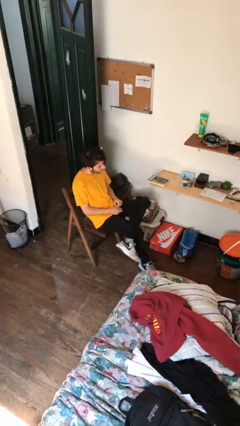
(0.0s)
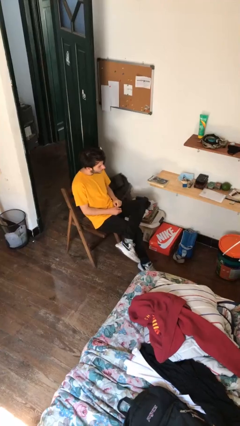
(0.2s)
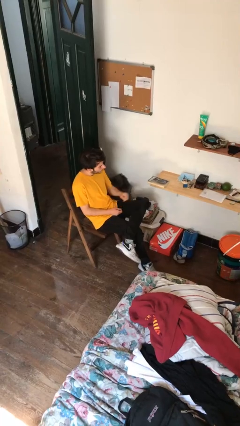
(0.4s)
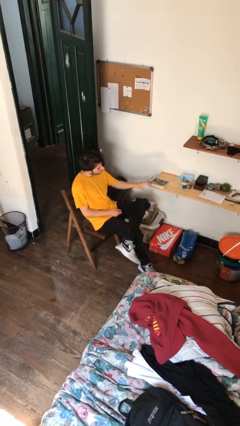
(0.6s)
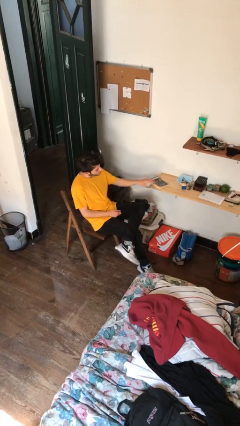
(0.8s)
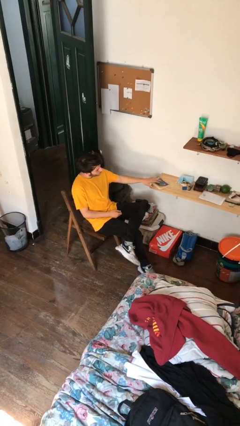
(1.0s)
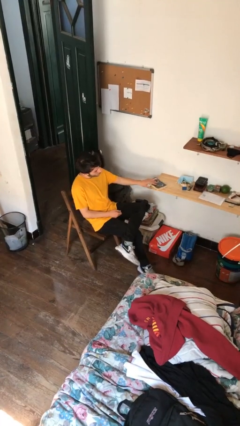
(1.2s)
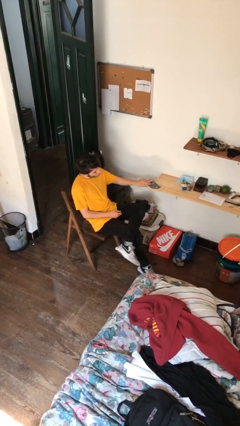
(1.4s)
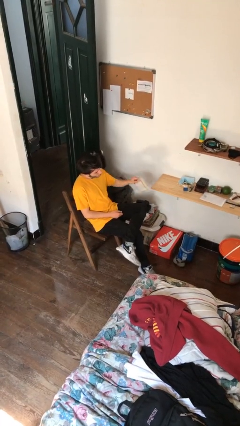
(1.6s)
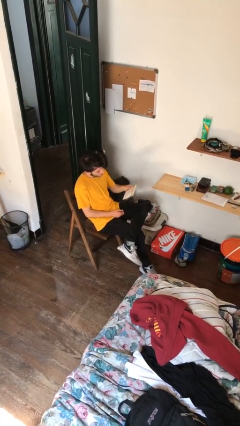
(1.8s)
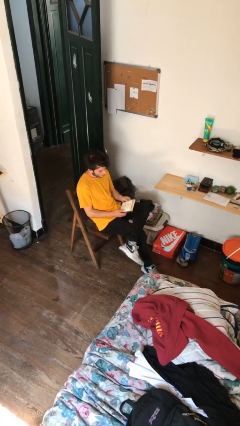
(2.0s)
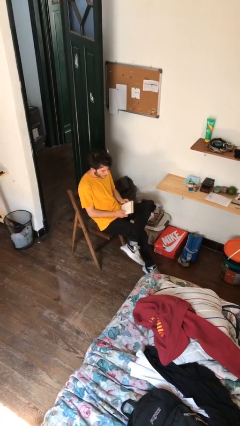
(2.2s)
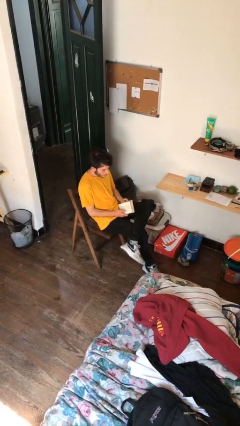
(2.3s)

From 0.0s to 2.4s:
person picks up object from table

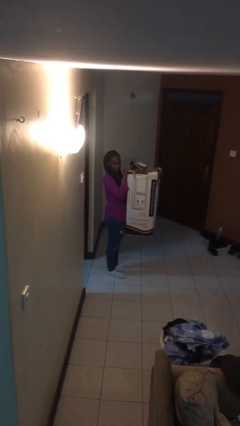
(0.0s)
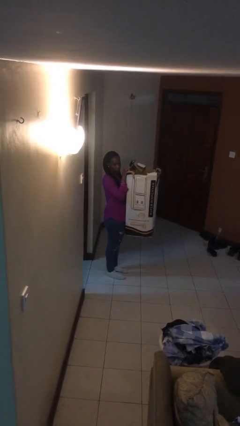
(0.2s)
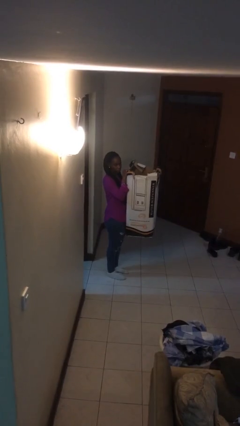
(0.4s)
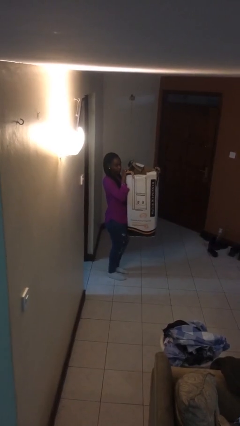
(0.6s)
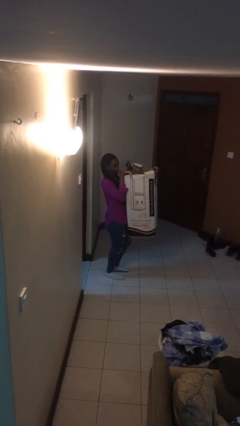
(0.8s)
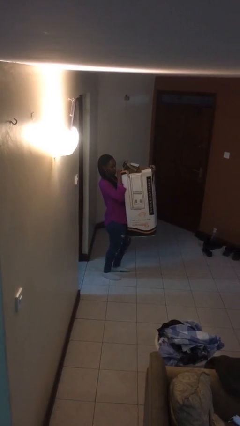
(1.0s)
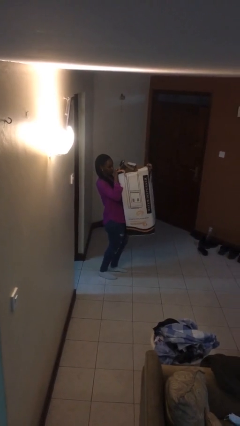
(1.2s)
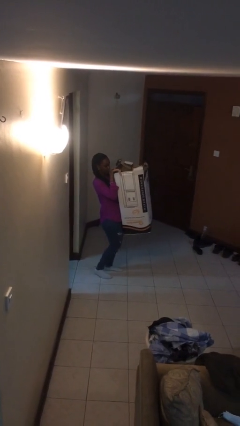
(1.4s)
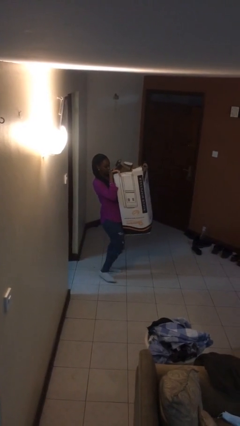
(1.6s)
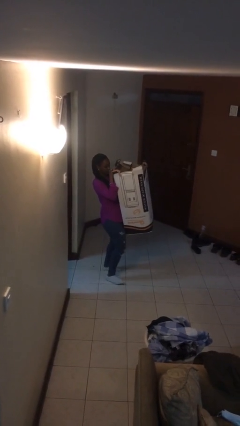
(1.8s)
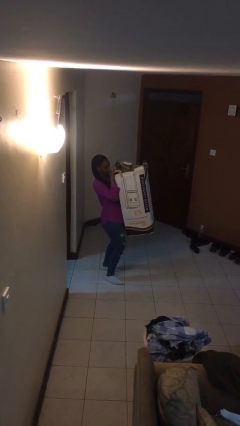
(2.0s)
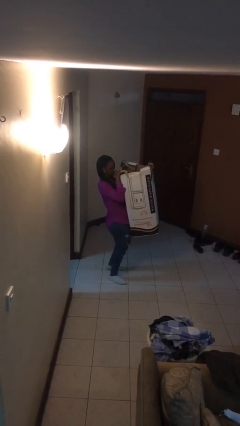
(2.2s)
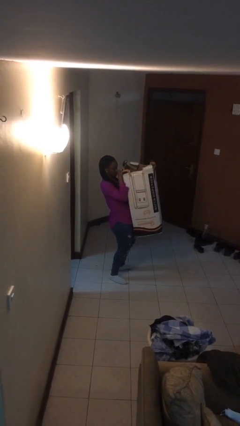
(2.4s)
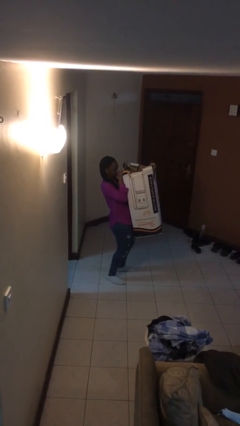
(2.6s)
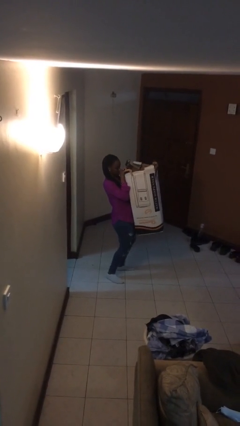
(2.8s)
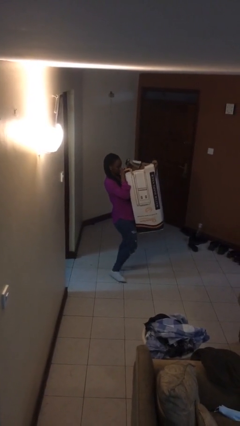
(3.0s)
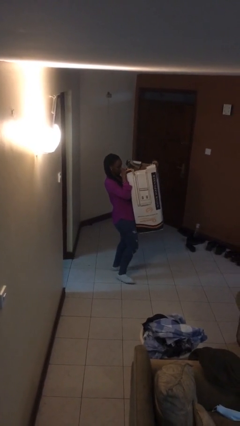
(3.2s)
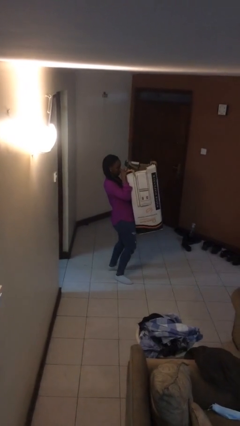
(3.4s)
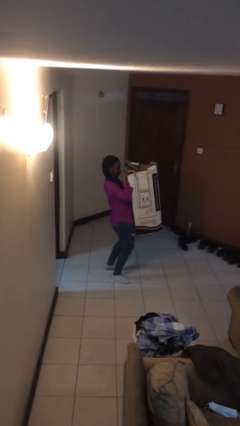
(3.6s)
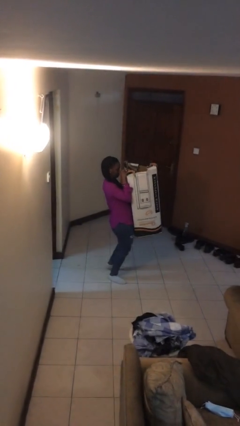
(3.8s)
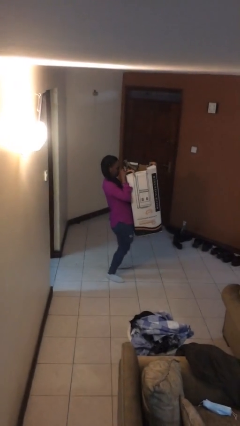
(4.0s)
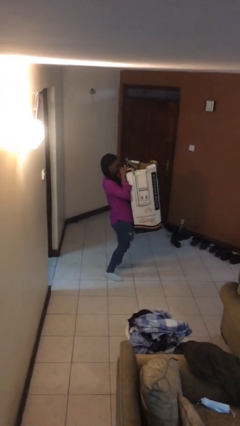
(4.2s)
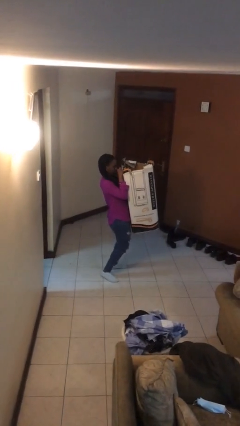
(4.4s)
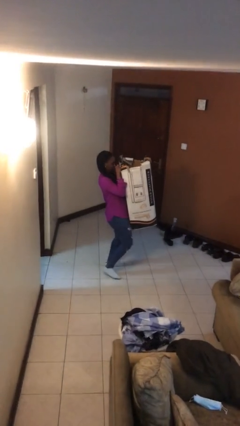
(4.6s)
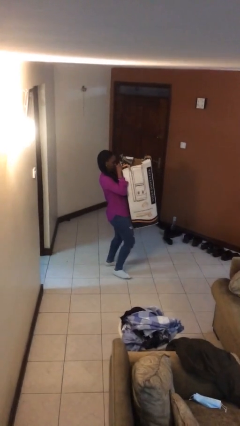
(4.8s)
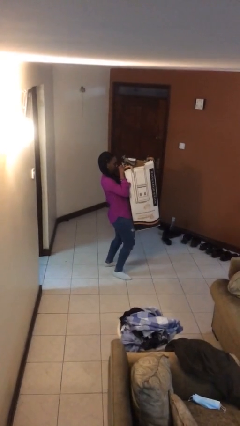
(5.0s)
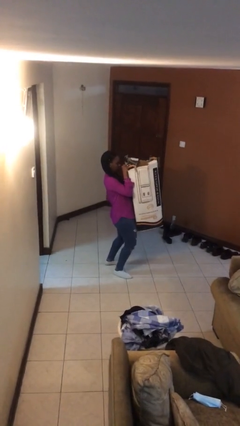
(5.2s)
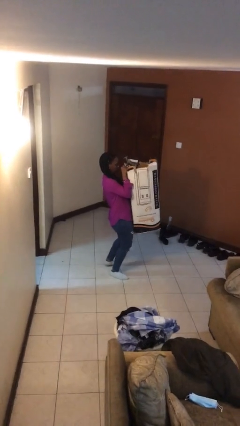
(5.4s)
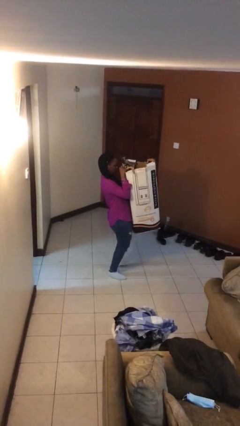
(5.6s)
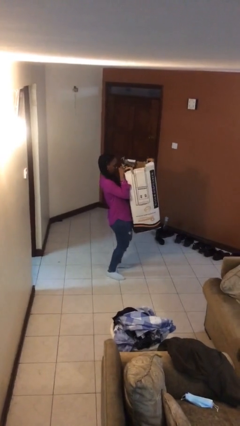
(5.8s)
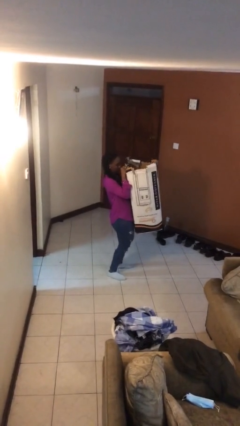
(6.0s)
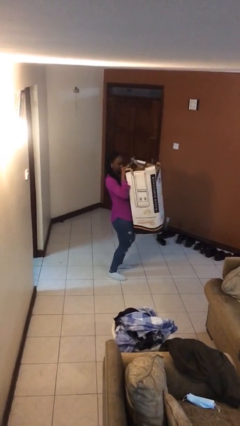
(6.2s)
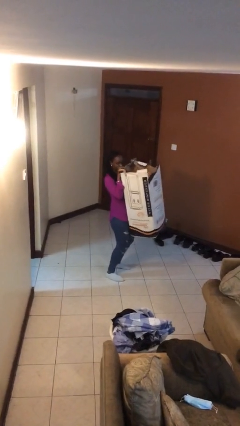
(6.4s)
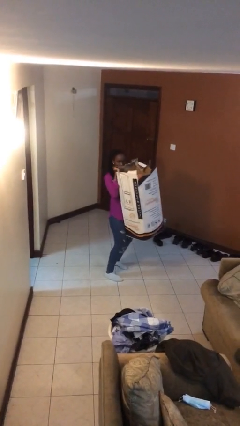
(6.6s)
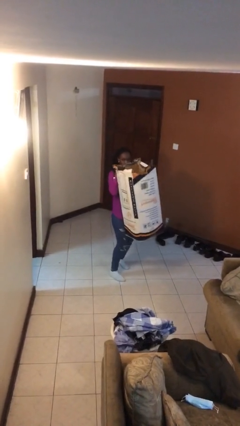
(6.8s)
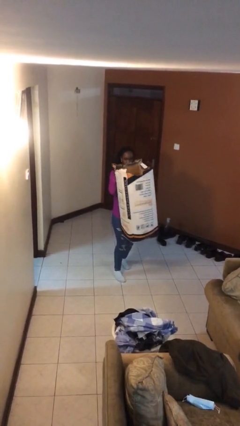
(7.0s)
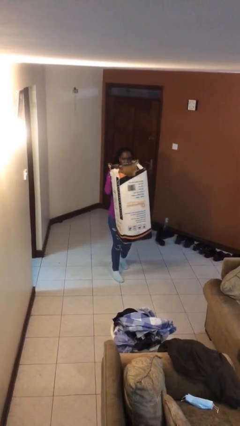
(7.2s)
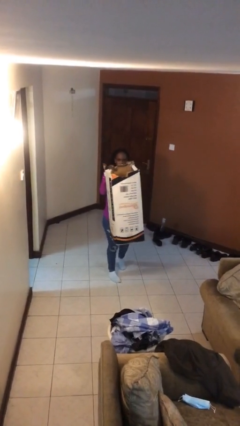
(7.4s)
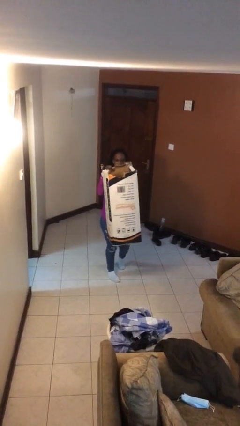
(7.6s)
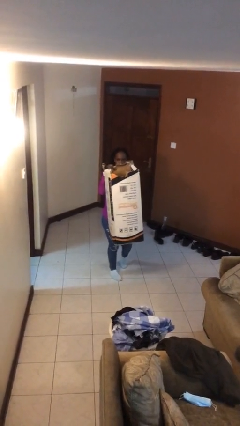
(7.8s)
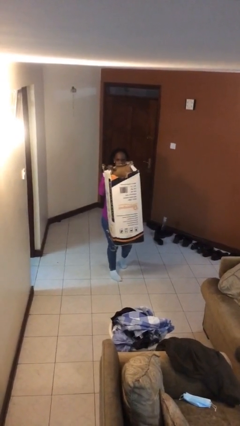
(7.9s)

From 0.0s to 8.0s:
person carries heavy object

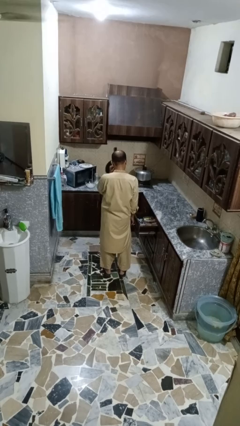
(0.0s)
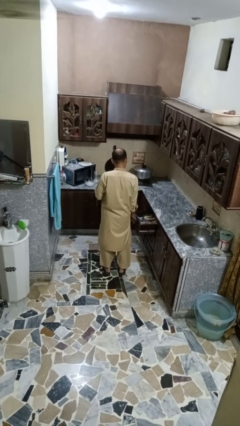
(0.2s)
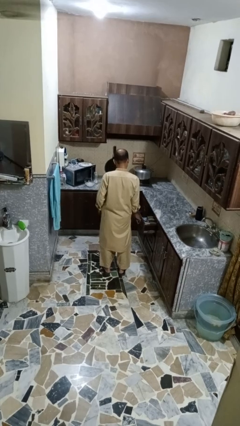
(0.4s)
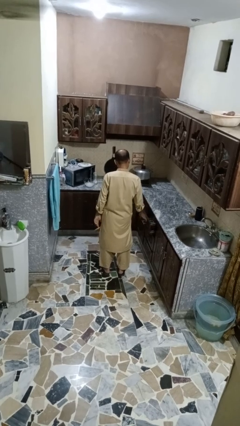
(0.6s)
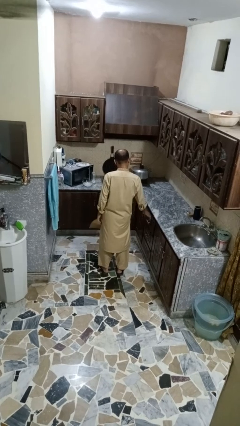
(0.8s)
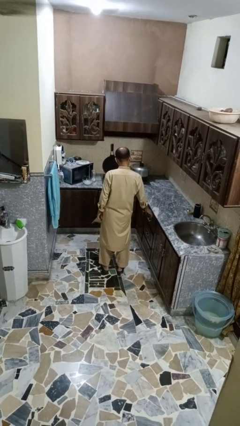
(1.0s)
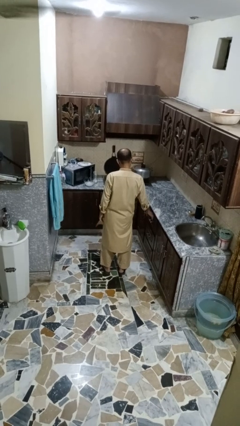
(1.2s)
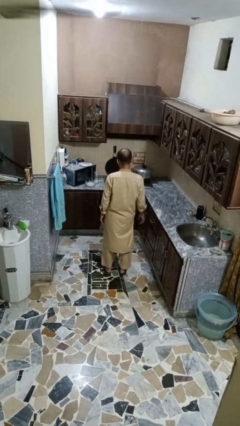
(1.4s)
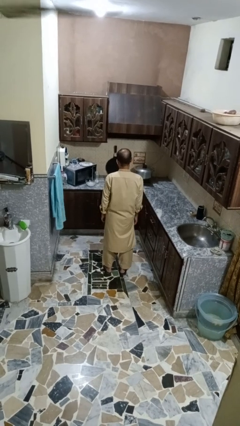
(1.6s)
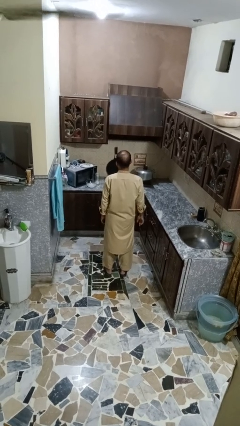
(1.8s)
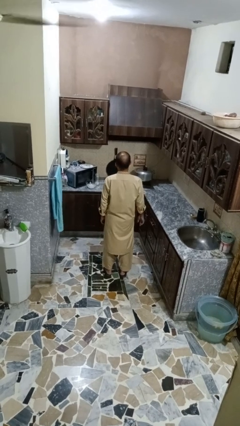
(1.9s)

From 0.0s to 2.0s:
person closes kitchen drawer

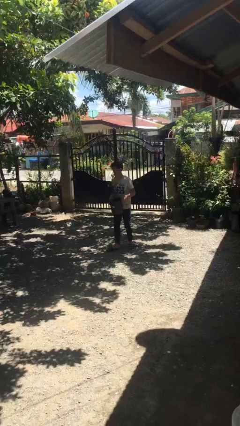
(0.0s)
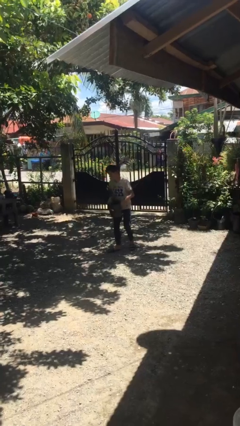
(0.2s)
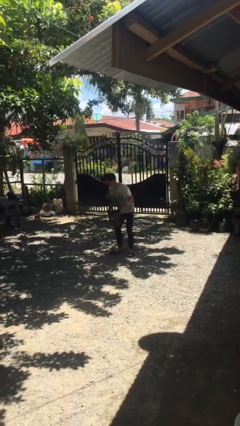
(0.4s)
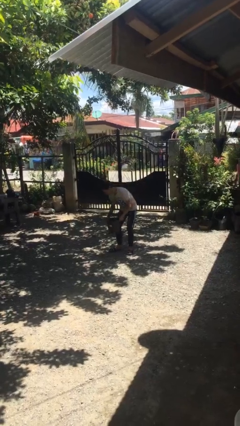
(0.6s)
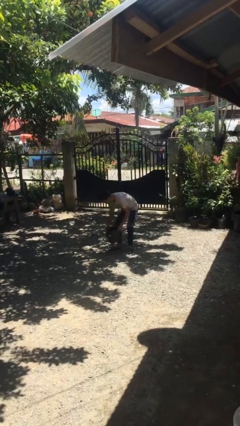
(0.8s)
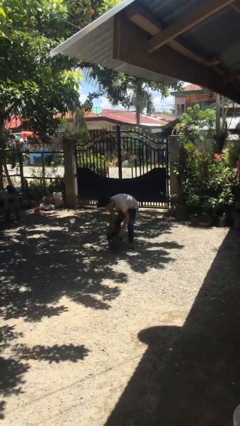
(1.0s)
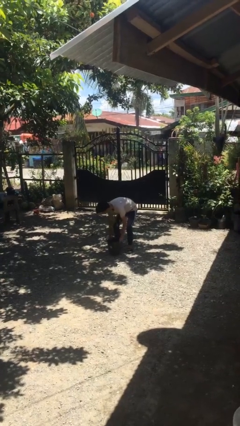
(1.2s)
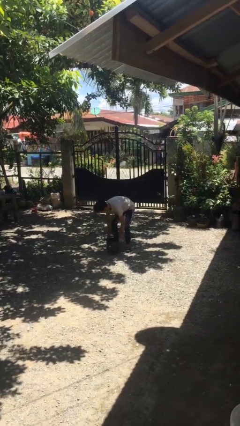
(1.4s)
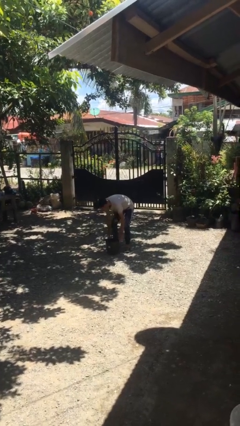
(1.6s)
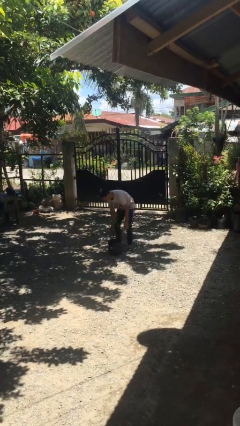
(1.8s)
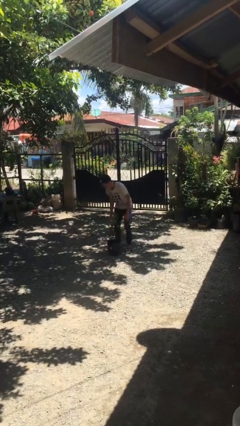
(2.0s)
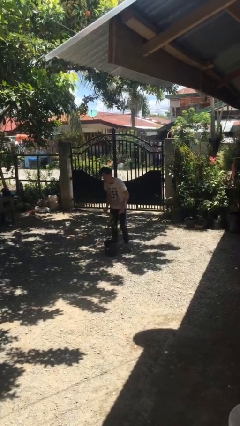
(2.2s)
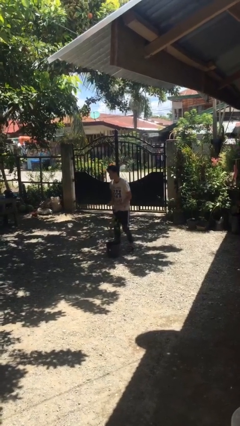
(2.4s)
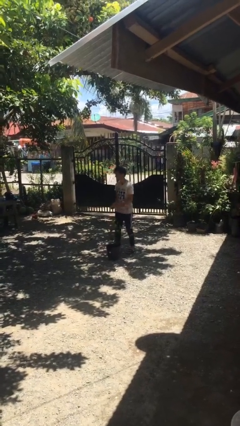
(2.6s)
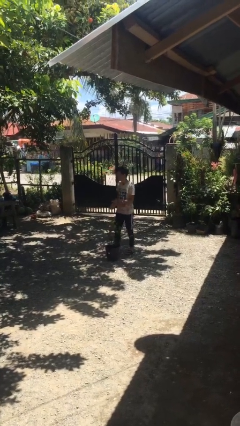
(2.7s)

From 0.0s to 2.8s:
person puts down object on floor

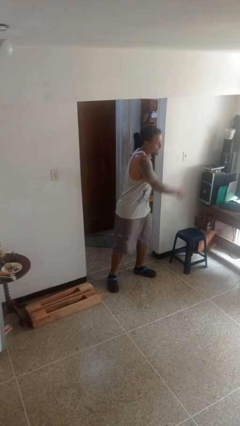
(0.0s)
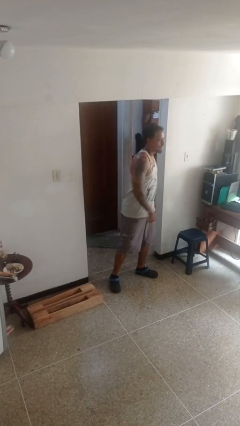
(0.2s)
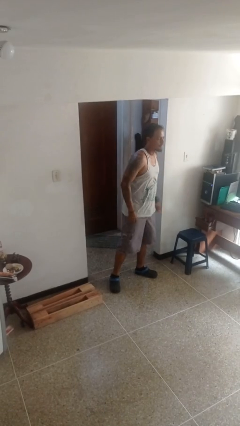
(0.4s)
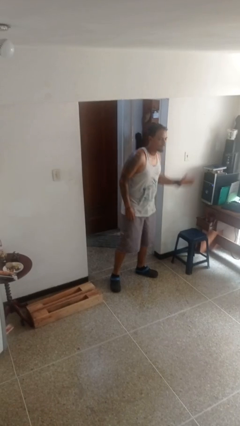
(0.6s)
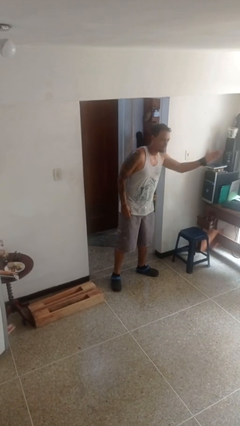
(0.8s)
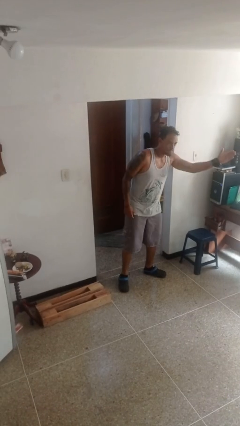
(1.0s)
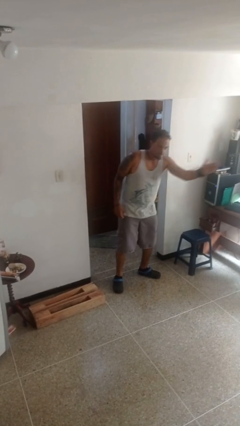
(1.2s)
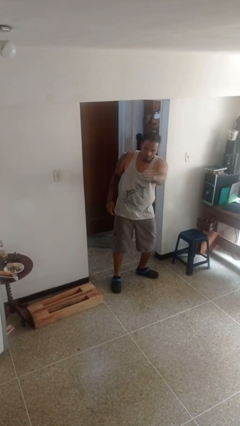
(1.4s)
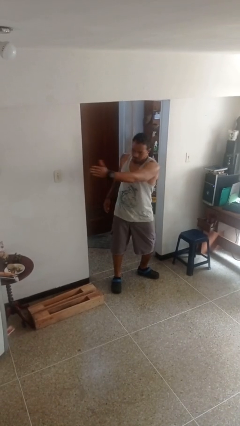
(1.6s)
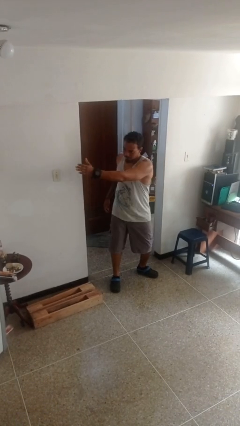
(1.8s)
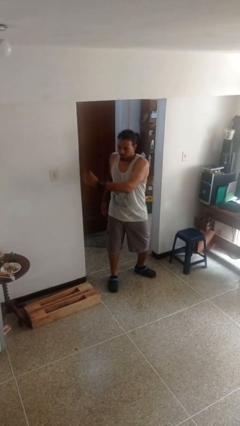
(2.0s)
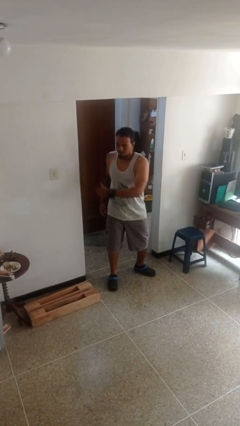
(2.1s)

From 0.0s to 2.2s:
person gestures swipe right

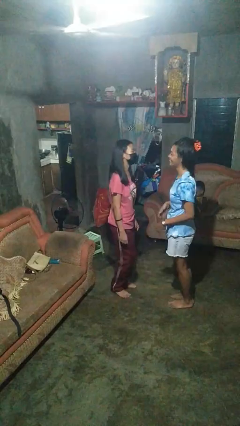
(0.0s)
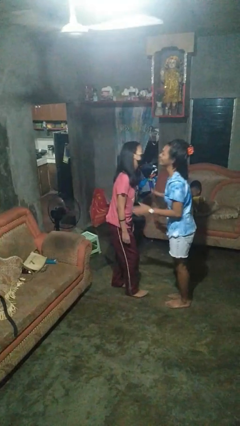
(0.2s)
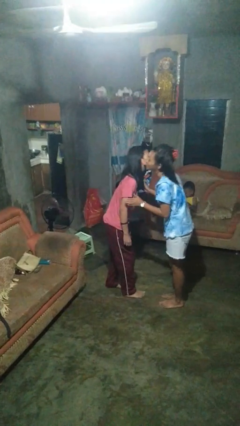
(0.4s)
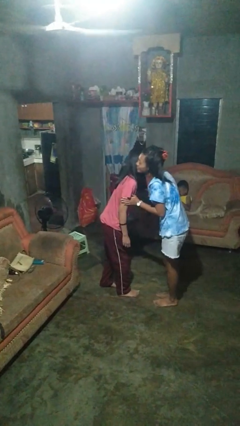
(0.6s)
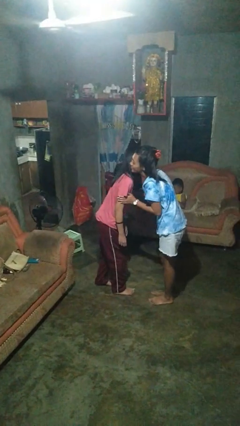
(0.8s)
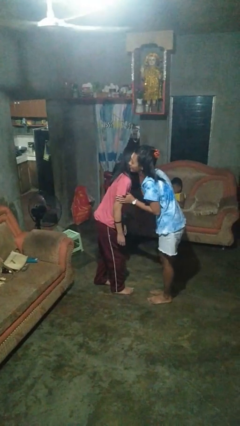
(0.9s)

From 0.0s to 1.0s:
person kisses cheek of person
